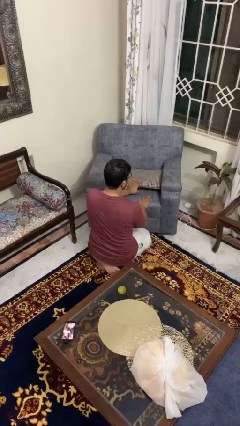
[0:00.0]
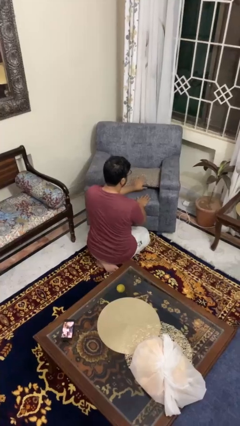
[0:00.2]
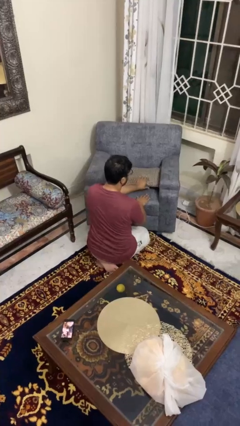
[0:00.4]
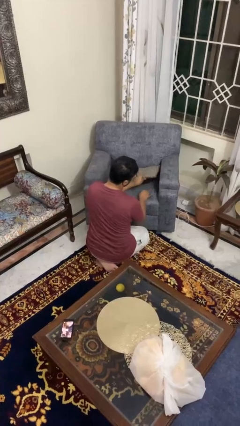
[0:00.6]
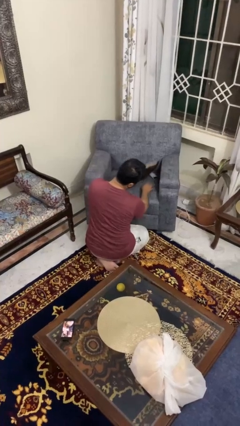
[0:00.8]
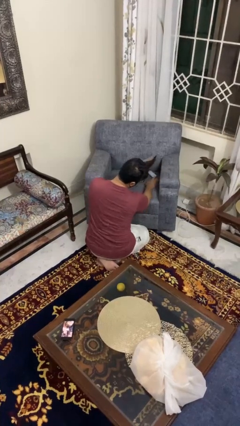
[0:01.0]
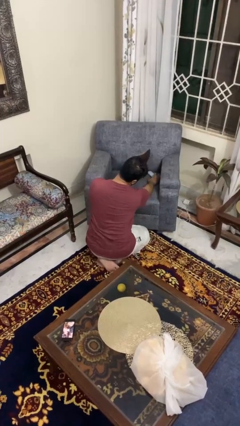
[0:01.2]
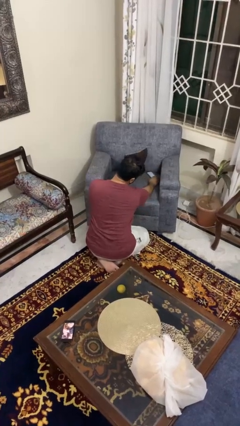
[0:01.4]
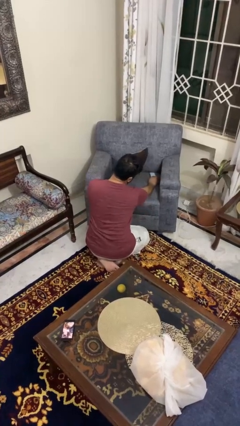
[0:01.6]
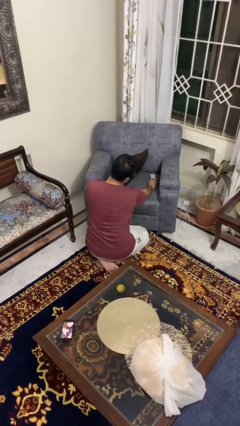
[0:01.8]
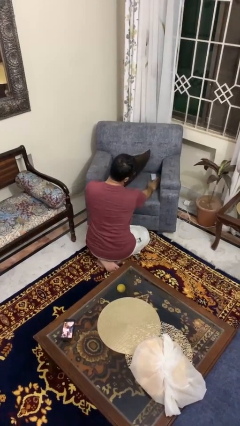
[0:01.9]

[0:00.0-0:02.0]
person searches in couch

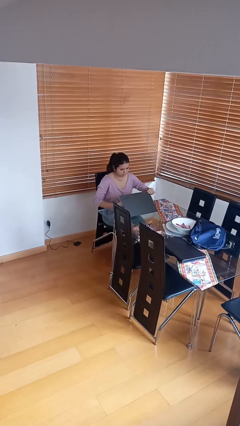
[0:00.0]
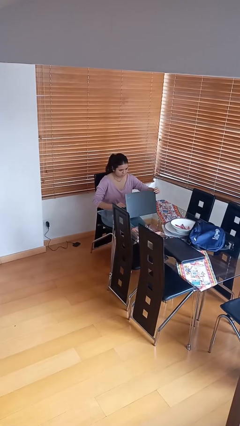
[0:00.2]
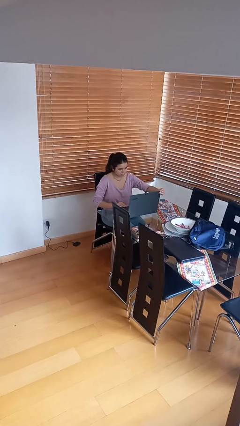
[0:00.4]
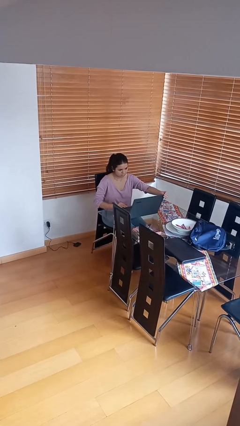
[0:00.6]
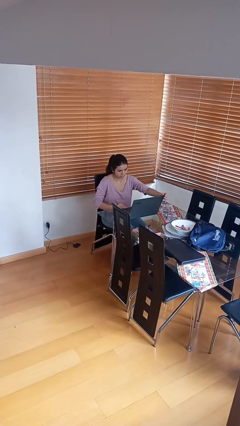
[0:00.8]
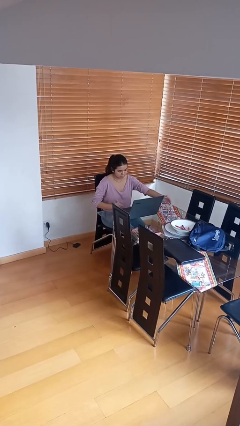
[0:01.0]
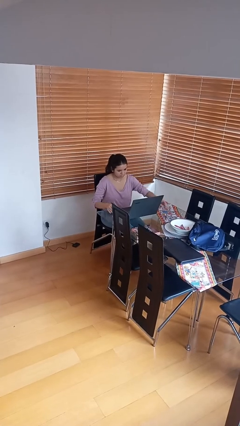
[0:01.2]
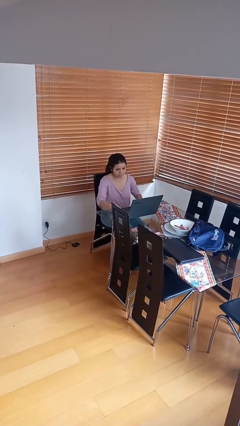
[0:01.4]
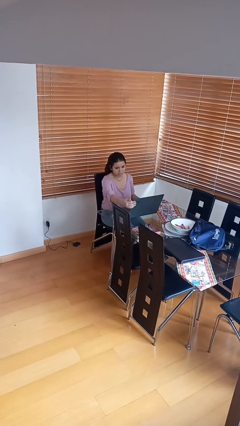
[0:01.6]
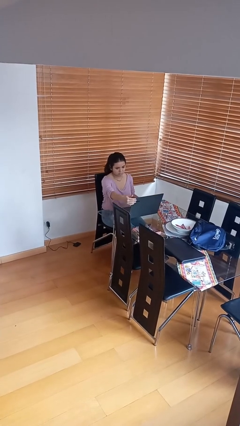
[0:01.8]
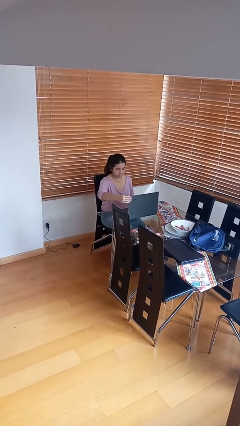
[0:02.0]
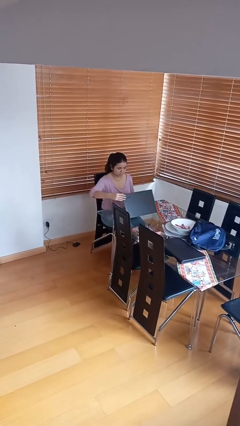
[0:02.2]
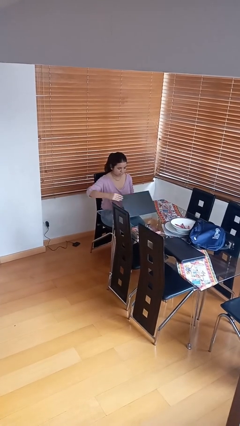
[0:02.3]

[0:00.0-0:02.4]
person interacts with laptop

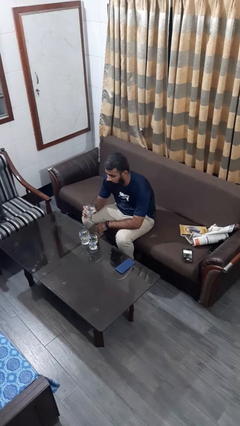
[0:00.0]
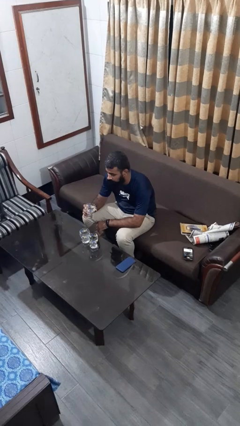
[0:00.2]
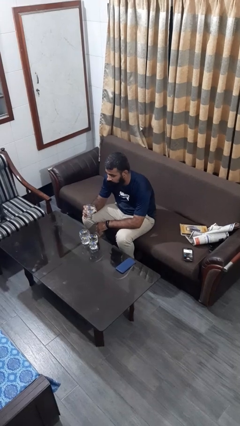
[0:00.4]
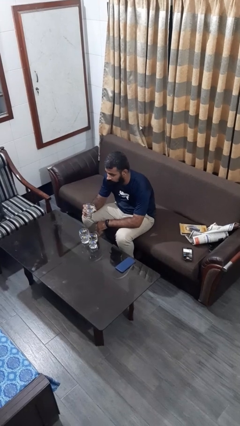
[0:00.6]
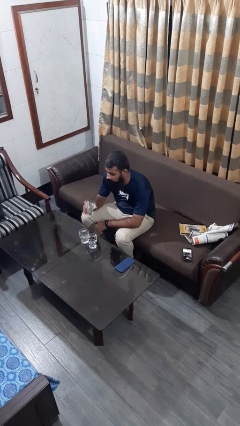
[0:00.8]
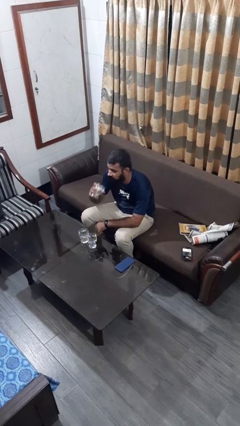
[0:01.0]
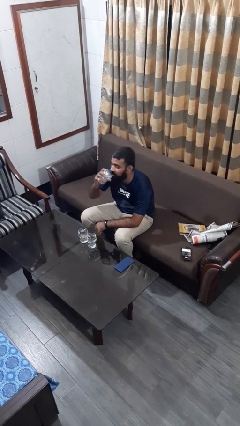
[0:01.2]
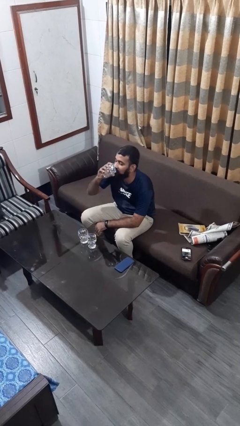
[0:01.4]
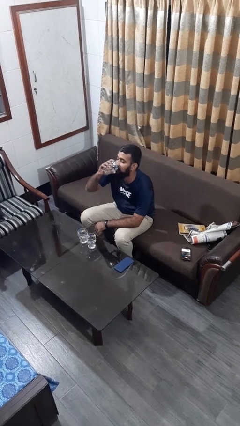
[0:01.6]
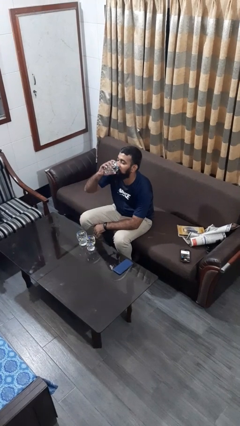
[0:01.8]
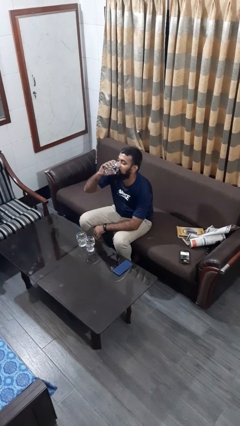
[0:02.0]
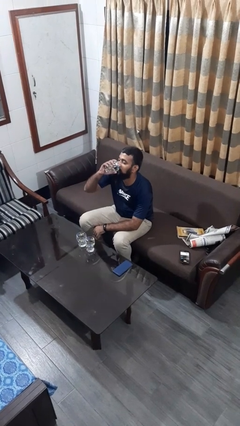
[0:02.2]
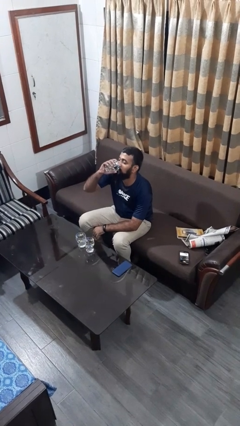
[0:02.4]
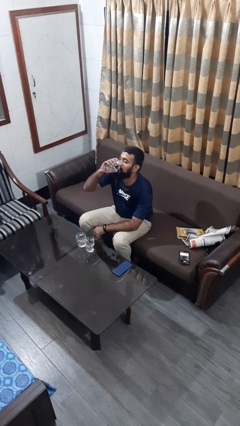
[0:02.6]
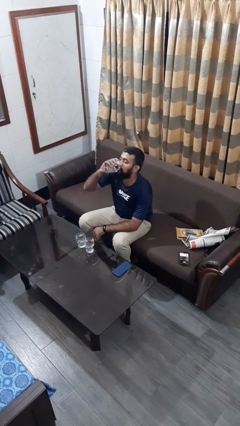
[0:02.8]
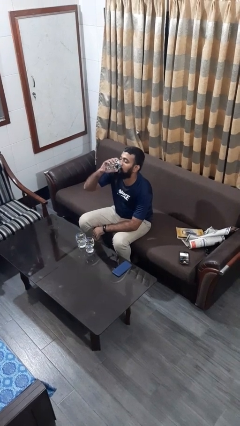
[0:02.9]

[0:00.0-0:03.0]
person drinks from shotglass

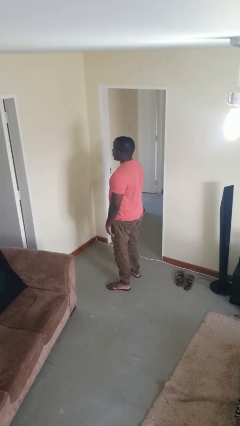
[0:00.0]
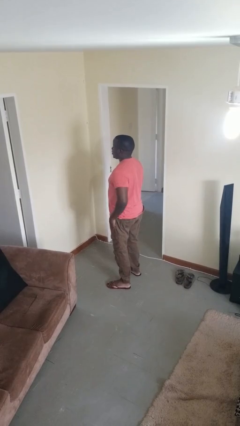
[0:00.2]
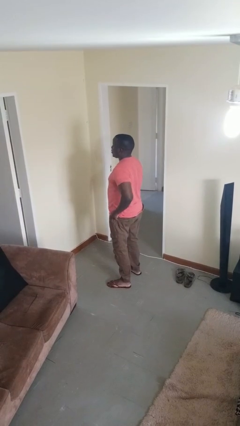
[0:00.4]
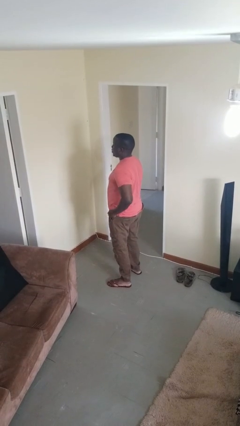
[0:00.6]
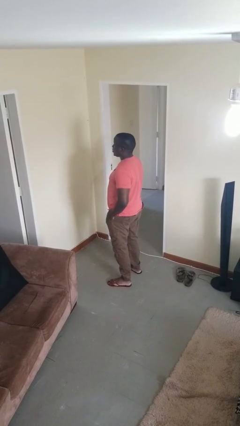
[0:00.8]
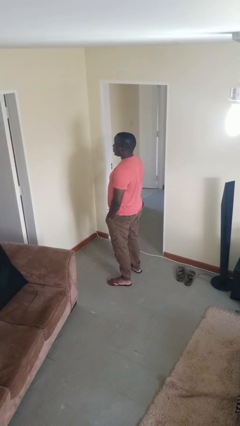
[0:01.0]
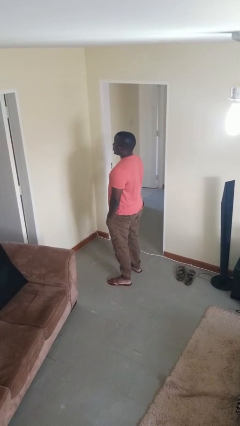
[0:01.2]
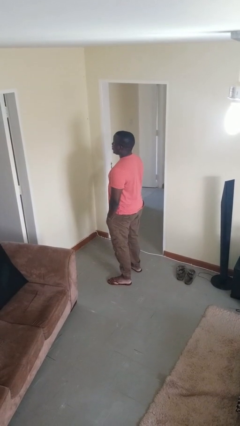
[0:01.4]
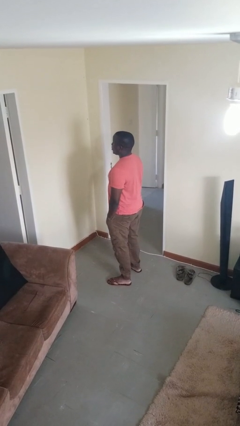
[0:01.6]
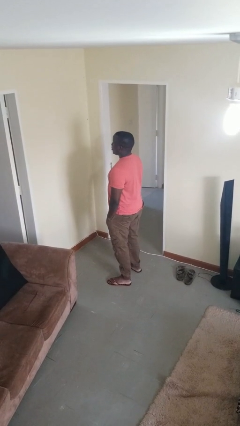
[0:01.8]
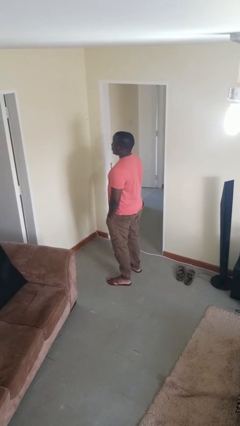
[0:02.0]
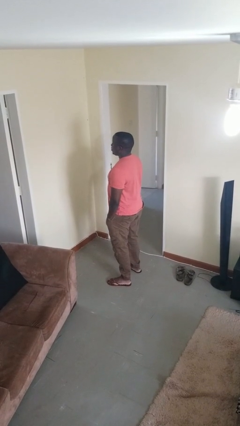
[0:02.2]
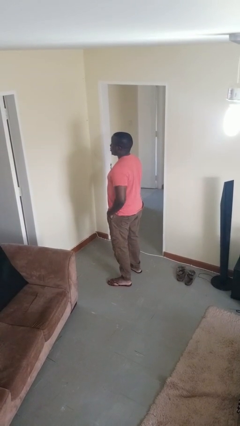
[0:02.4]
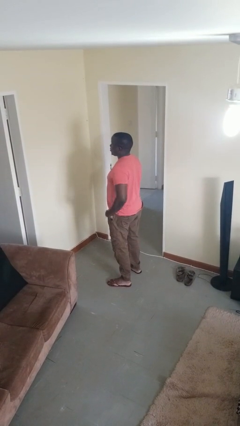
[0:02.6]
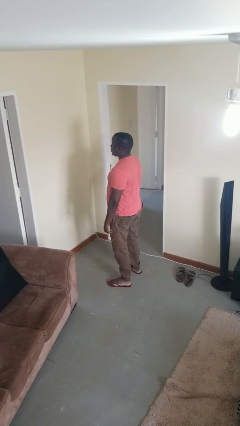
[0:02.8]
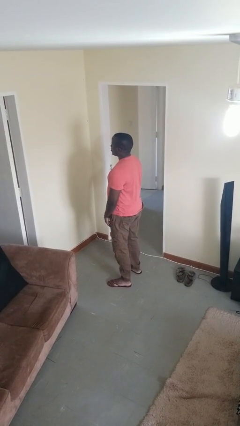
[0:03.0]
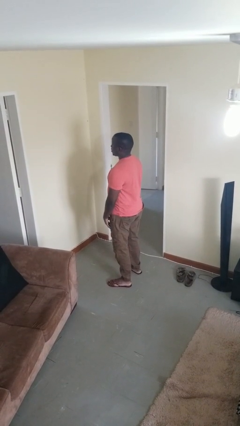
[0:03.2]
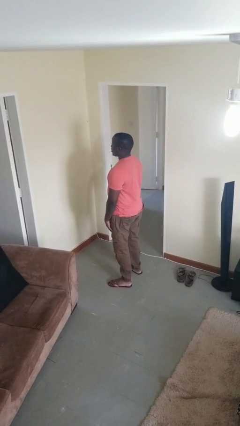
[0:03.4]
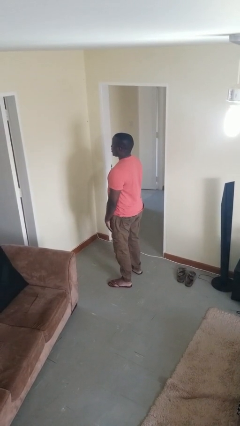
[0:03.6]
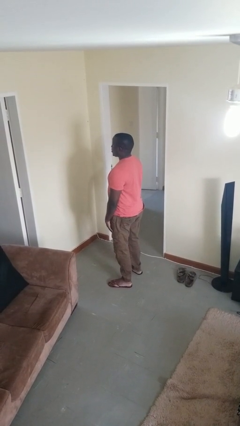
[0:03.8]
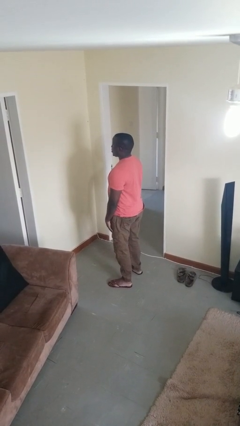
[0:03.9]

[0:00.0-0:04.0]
person puts hands in back pockets

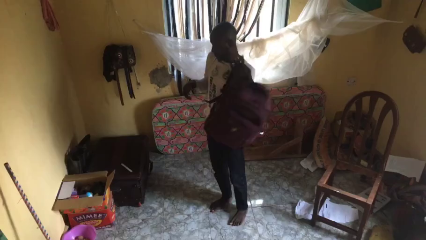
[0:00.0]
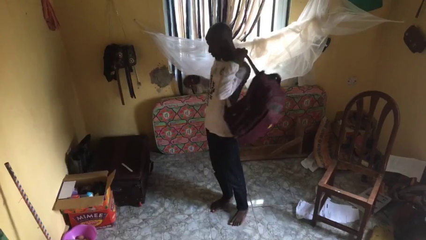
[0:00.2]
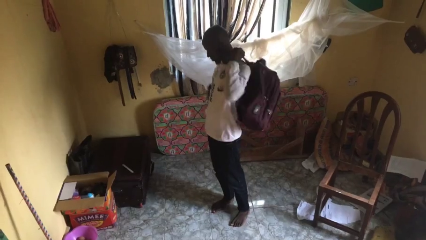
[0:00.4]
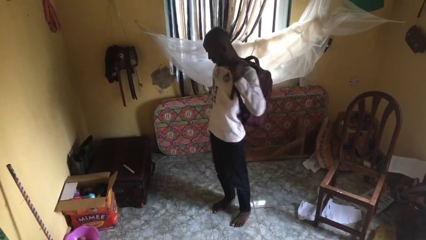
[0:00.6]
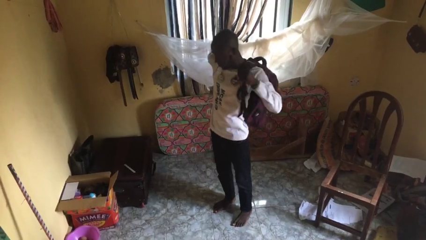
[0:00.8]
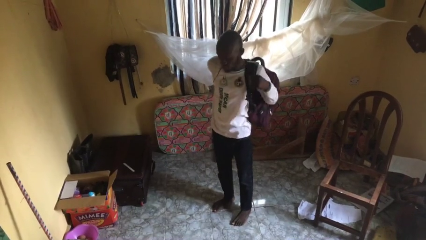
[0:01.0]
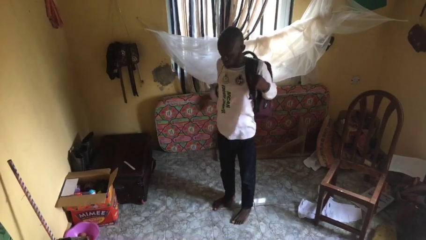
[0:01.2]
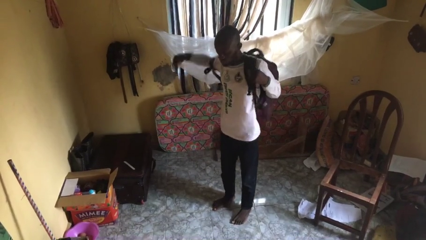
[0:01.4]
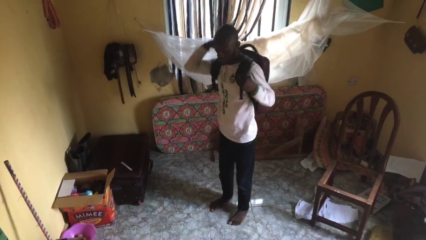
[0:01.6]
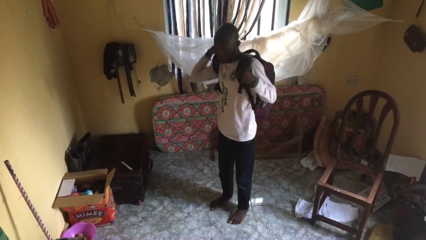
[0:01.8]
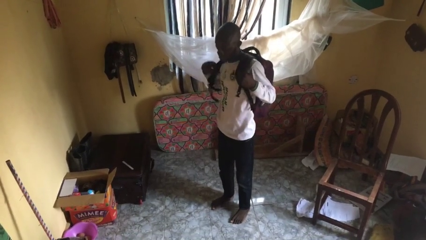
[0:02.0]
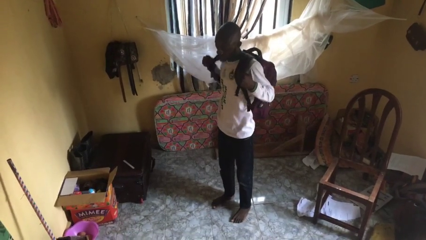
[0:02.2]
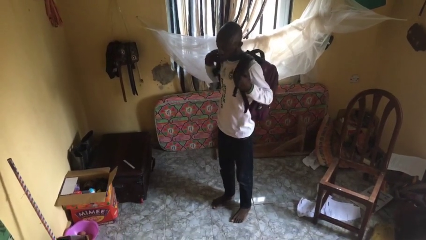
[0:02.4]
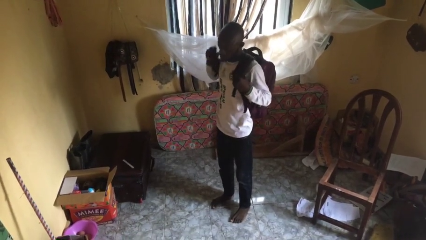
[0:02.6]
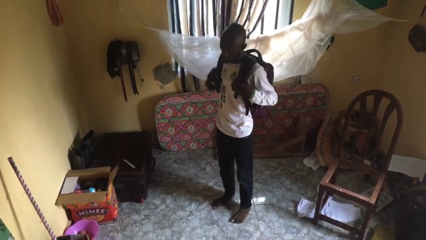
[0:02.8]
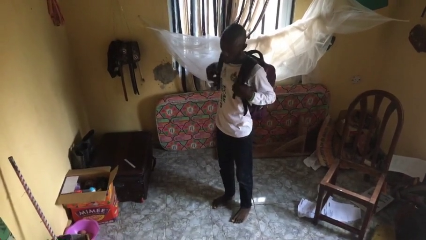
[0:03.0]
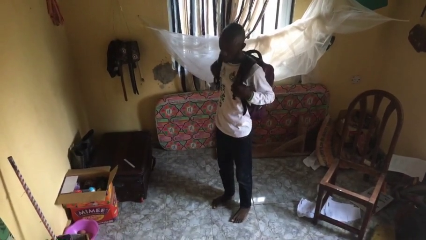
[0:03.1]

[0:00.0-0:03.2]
person puts on backpack

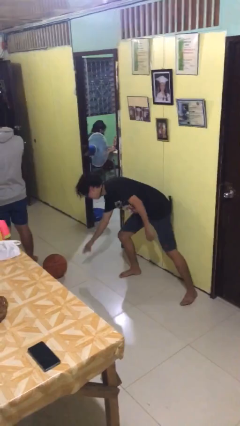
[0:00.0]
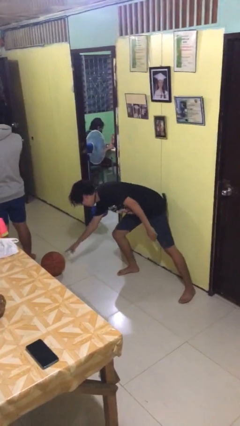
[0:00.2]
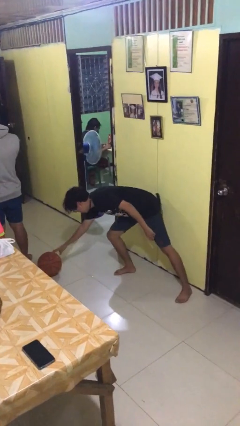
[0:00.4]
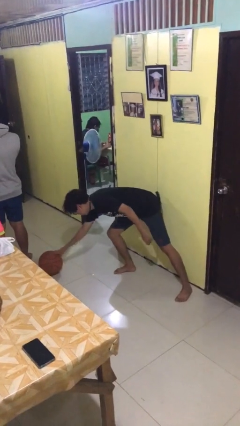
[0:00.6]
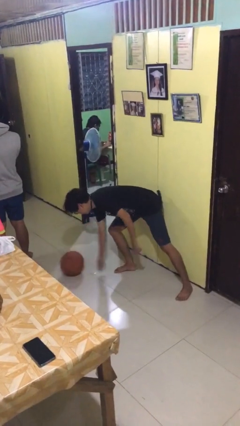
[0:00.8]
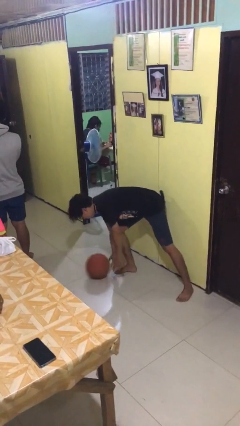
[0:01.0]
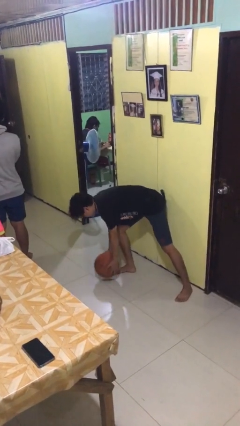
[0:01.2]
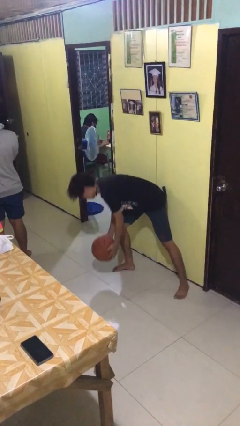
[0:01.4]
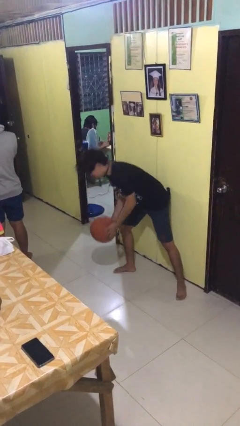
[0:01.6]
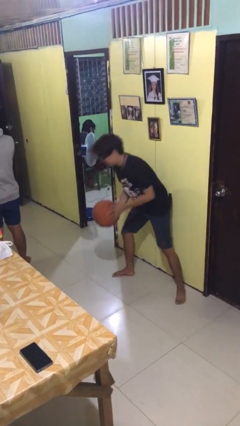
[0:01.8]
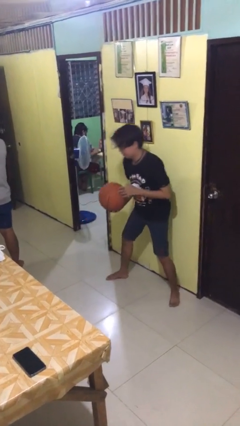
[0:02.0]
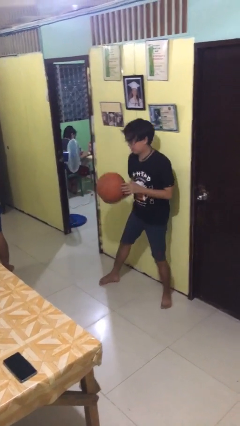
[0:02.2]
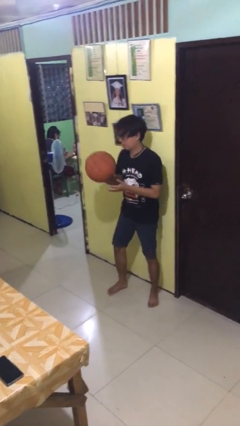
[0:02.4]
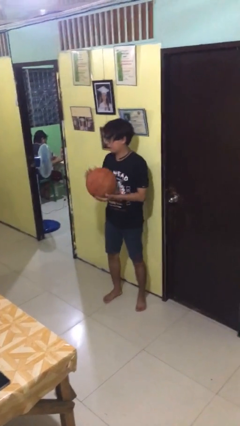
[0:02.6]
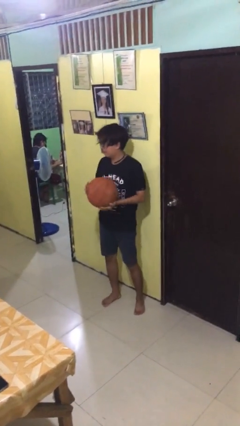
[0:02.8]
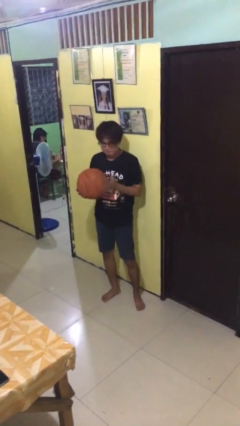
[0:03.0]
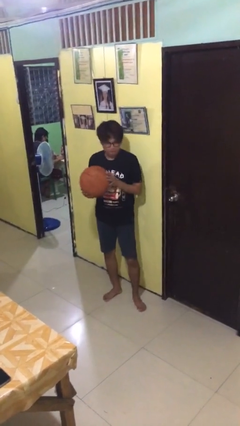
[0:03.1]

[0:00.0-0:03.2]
person steals object from person
